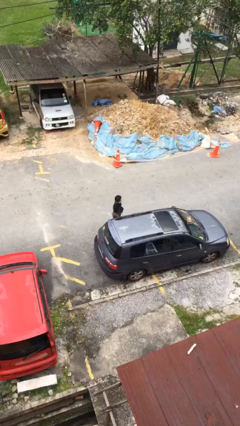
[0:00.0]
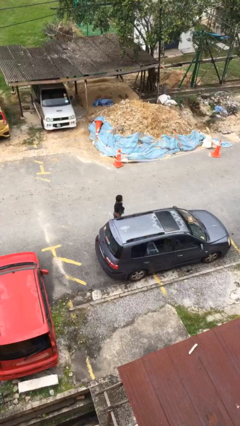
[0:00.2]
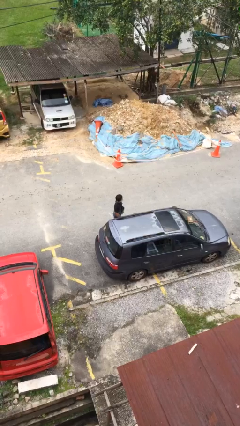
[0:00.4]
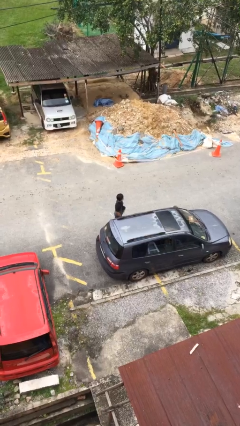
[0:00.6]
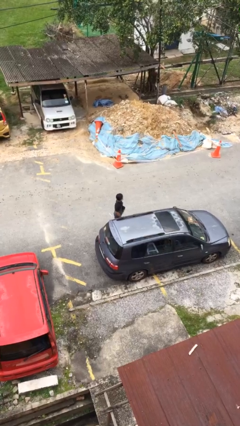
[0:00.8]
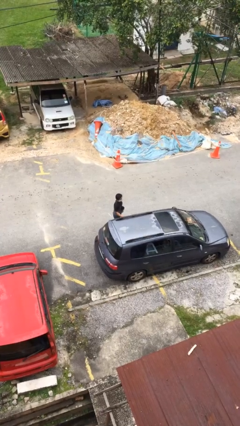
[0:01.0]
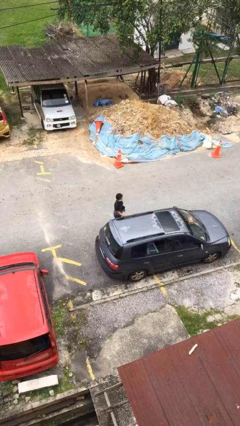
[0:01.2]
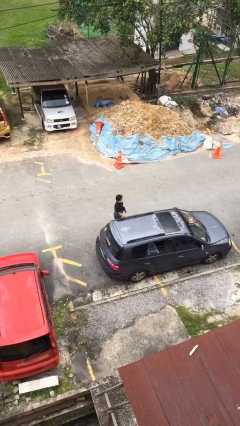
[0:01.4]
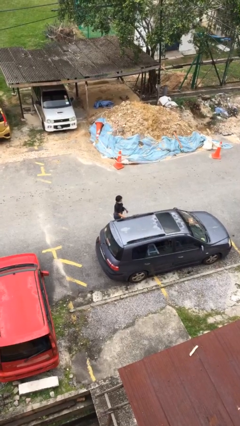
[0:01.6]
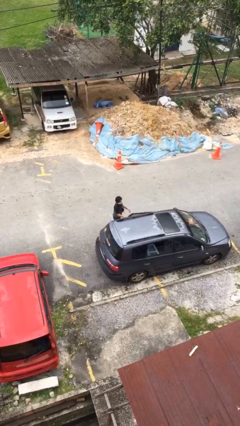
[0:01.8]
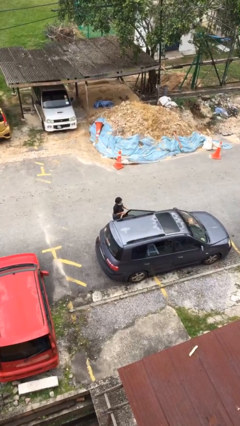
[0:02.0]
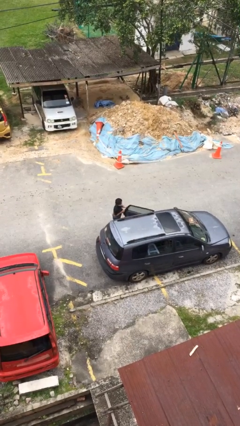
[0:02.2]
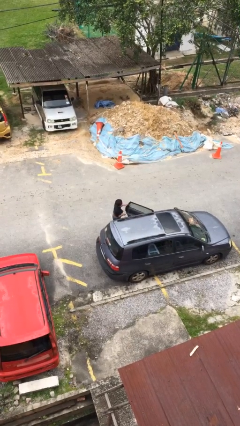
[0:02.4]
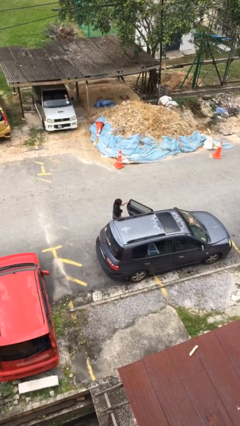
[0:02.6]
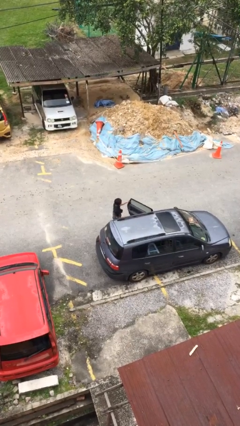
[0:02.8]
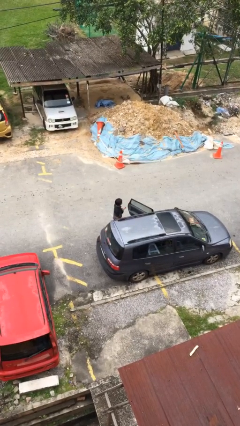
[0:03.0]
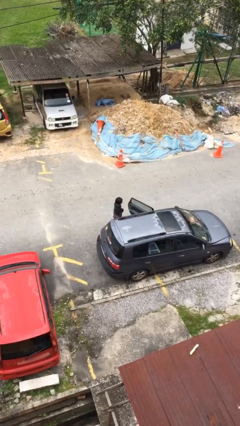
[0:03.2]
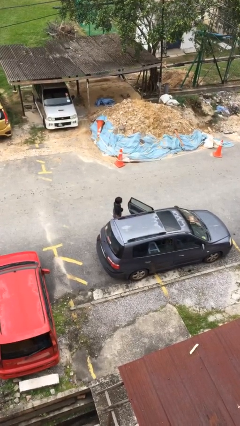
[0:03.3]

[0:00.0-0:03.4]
person opens car door

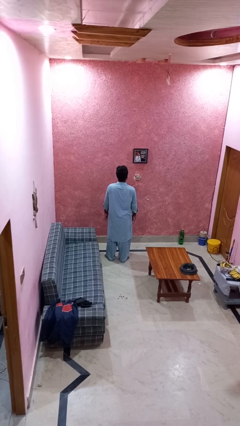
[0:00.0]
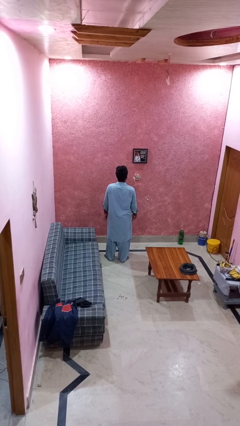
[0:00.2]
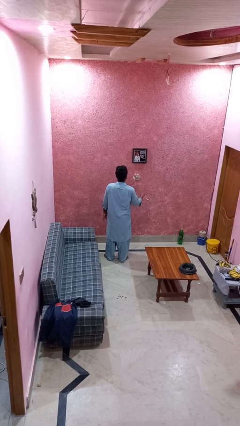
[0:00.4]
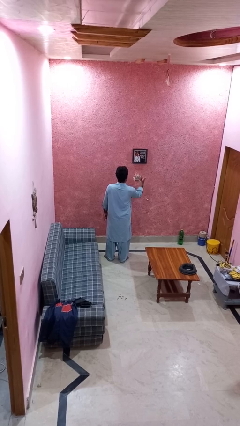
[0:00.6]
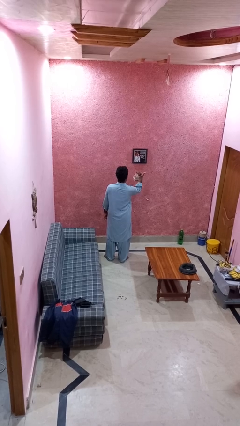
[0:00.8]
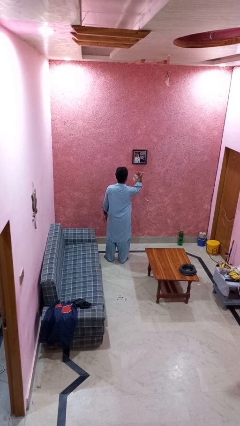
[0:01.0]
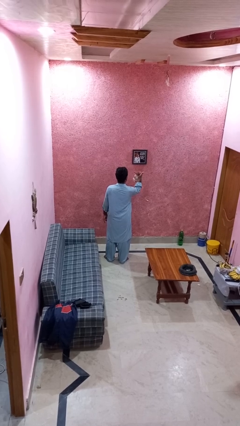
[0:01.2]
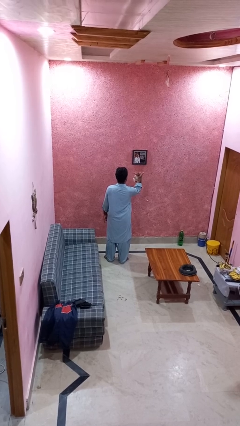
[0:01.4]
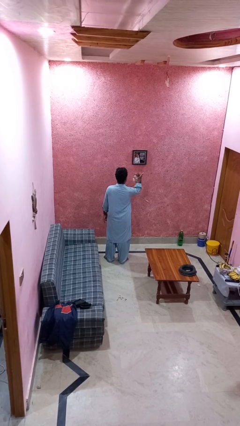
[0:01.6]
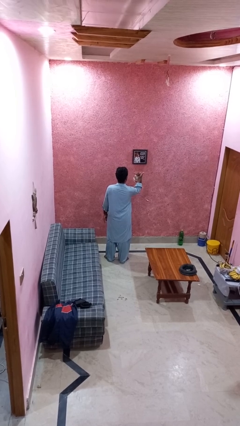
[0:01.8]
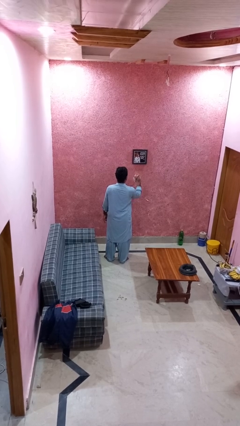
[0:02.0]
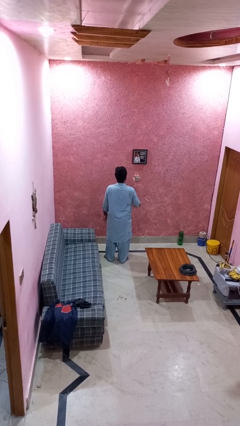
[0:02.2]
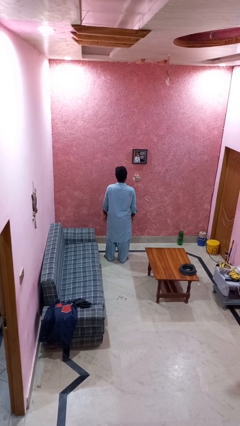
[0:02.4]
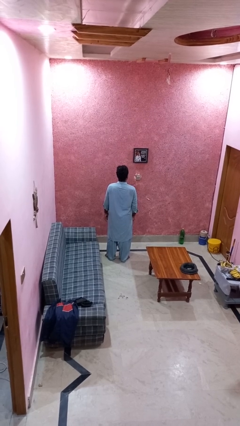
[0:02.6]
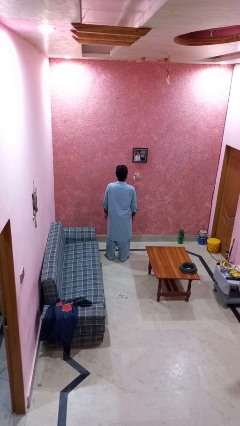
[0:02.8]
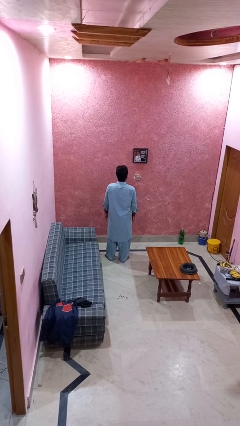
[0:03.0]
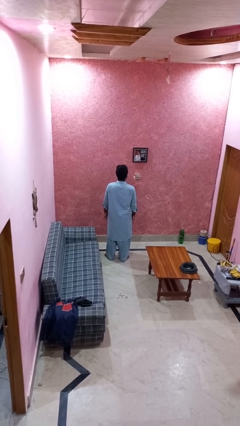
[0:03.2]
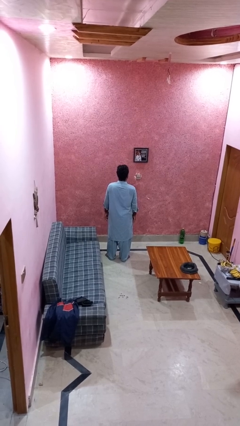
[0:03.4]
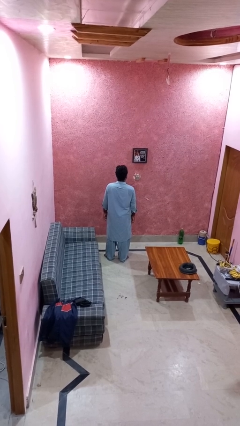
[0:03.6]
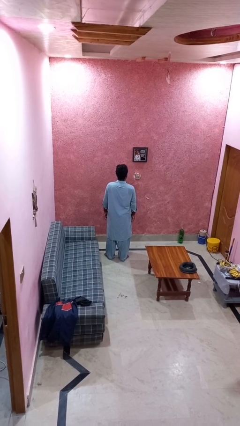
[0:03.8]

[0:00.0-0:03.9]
person gestures hang loose

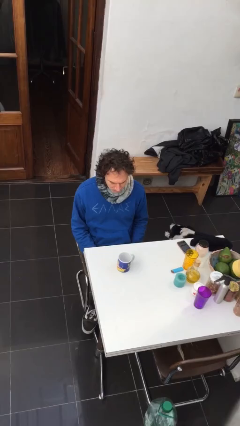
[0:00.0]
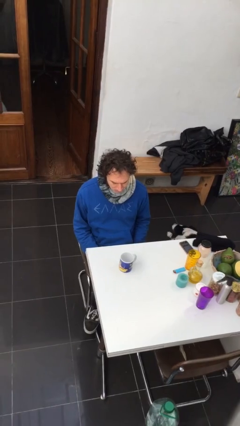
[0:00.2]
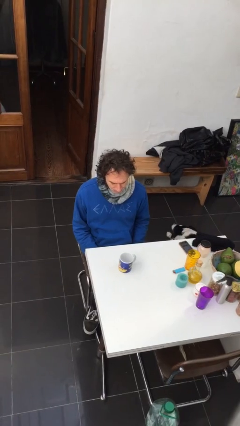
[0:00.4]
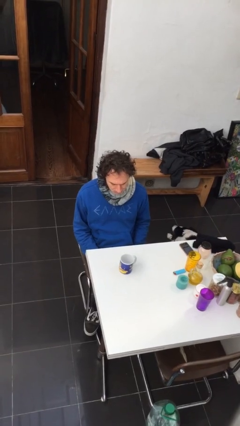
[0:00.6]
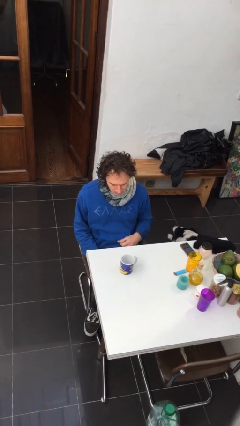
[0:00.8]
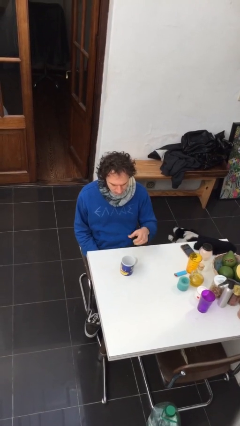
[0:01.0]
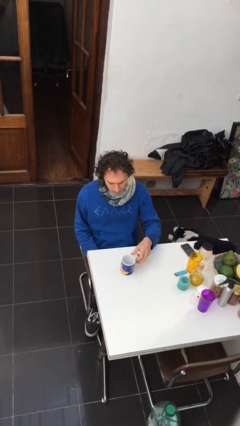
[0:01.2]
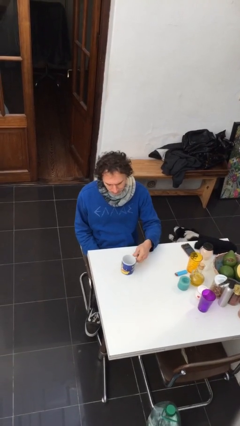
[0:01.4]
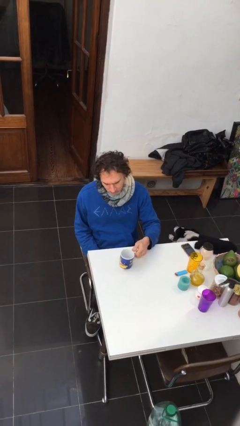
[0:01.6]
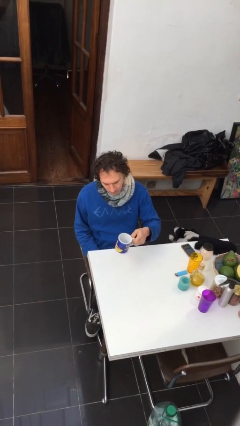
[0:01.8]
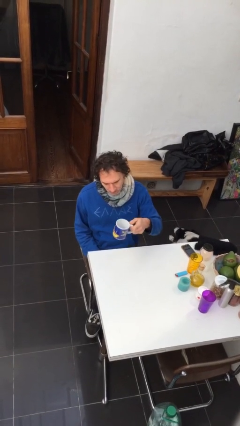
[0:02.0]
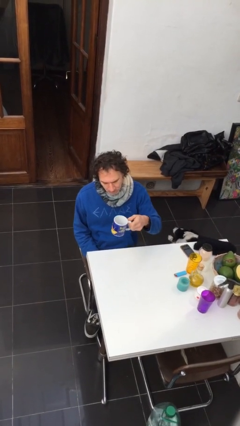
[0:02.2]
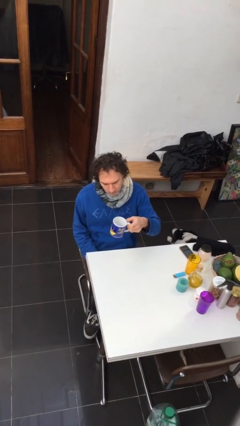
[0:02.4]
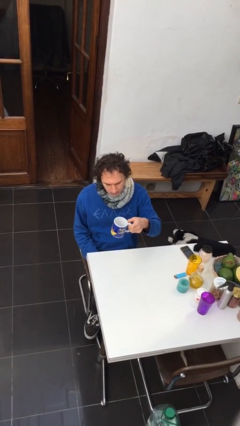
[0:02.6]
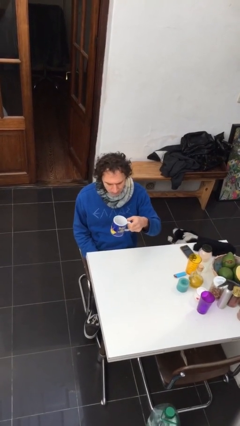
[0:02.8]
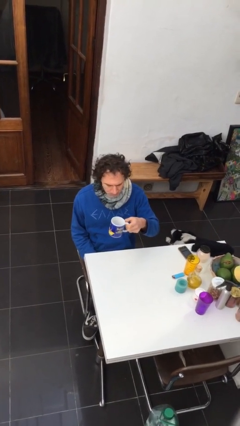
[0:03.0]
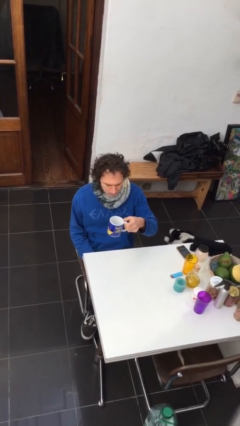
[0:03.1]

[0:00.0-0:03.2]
person picks up object from table

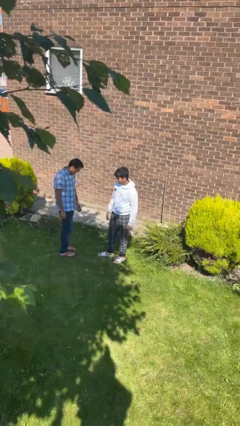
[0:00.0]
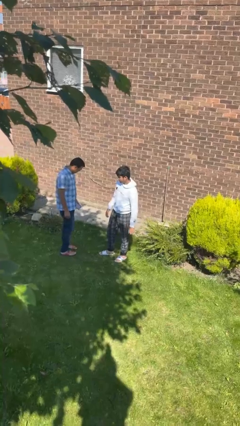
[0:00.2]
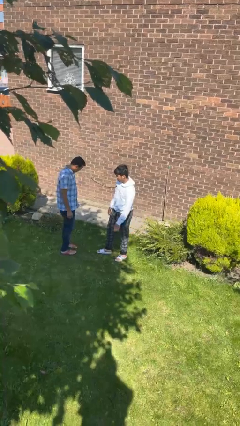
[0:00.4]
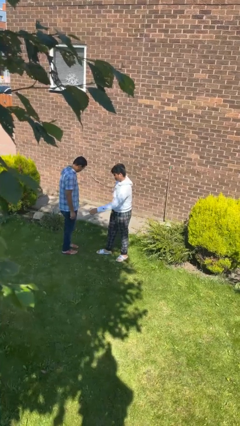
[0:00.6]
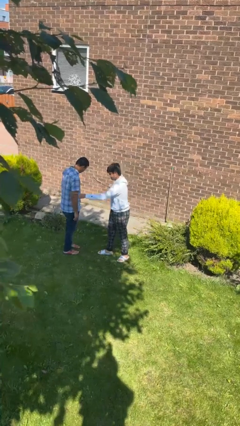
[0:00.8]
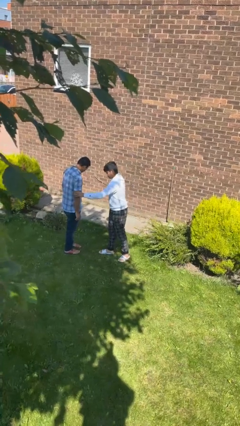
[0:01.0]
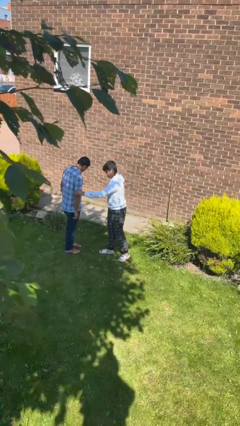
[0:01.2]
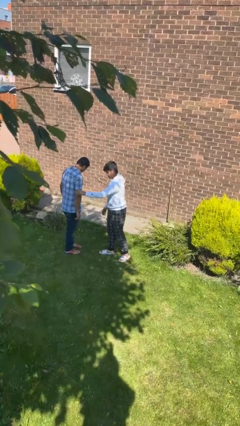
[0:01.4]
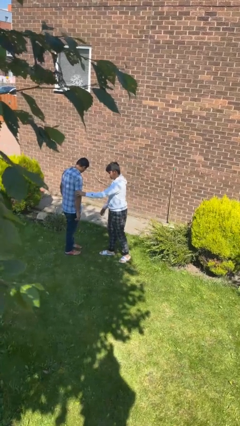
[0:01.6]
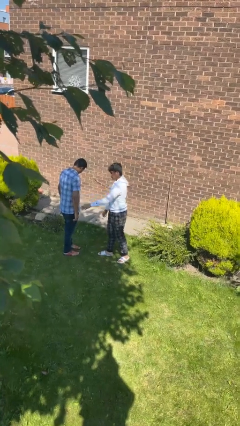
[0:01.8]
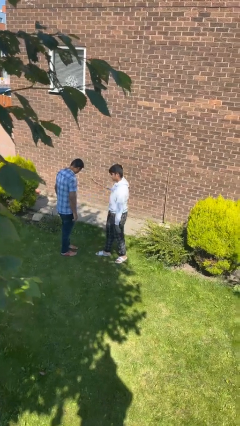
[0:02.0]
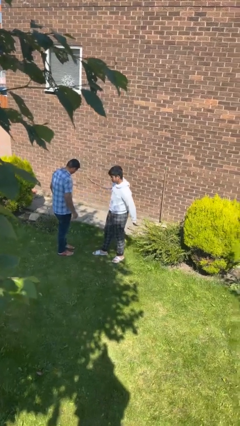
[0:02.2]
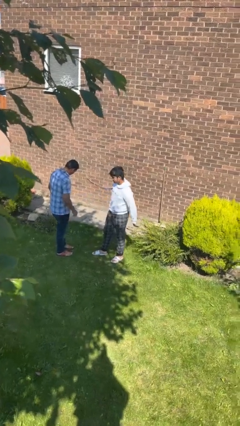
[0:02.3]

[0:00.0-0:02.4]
person grabs person by bicep

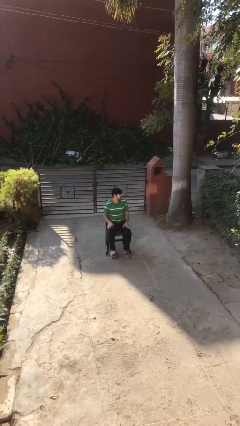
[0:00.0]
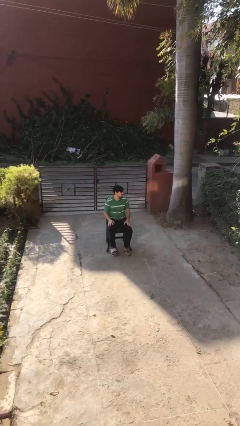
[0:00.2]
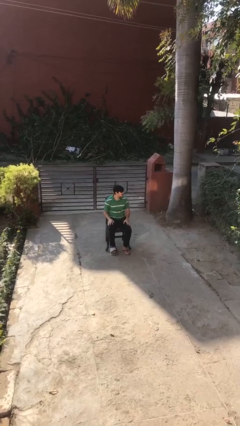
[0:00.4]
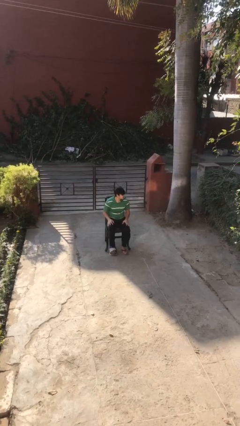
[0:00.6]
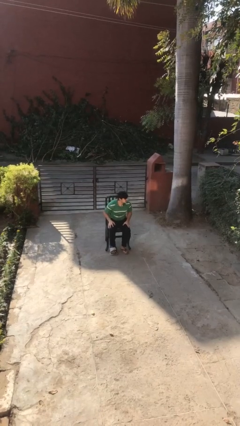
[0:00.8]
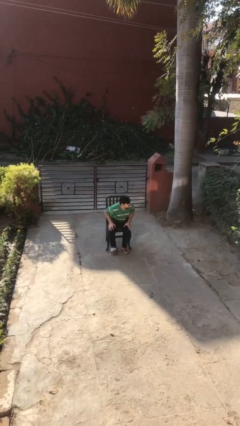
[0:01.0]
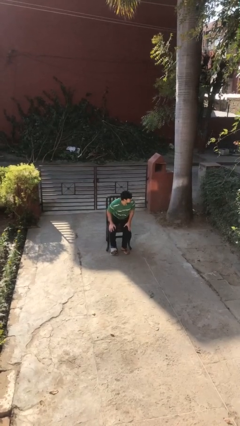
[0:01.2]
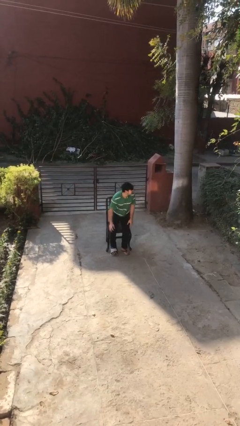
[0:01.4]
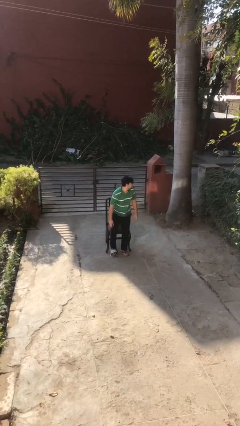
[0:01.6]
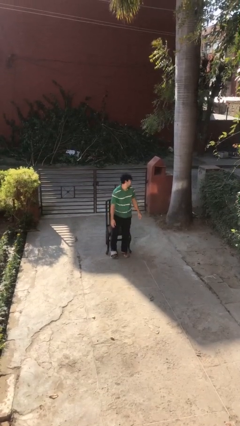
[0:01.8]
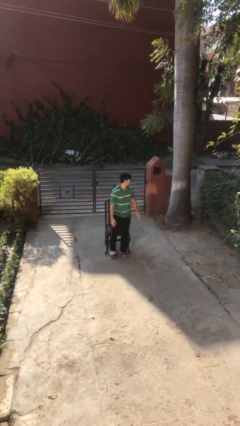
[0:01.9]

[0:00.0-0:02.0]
person stands up

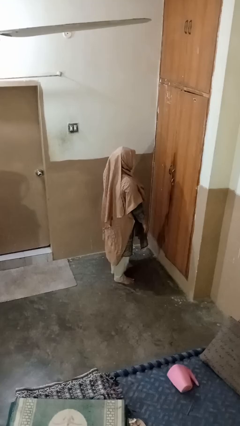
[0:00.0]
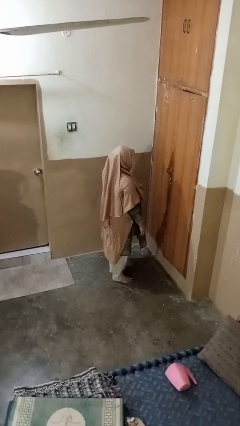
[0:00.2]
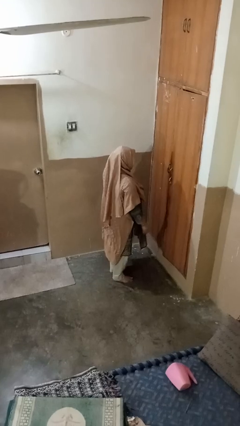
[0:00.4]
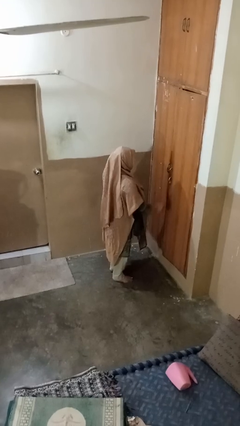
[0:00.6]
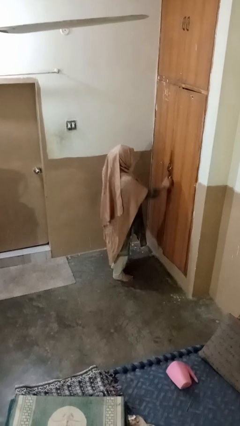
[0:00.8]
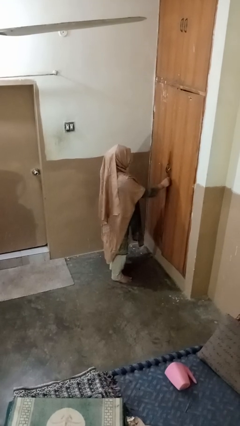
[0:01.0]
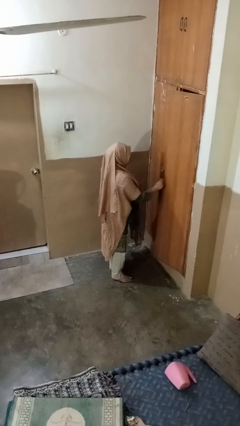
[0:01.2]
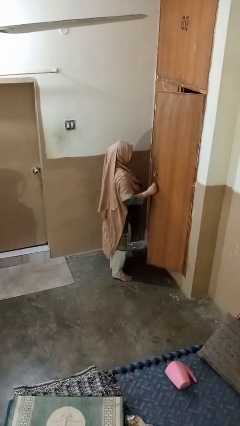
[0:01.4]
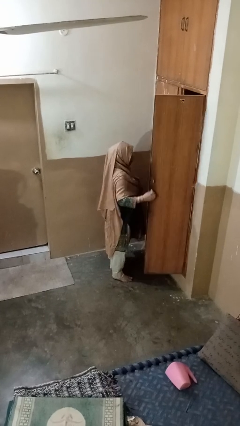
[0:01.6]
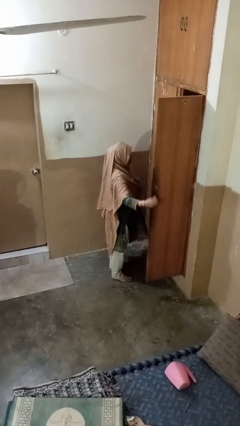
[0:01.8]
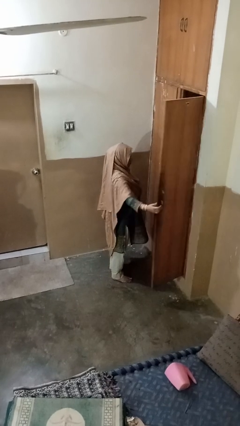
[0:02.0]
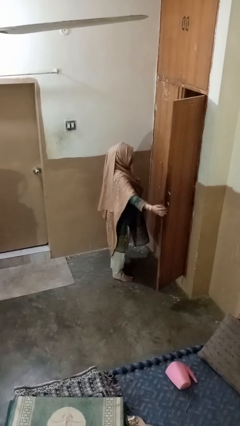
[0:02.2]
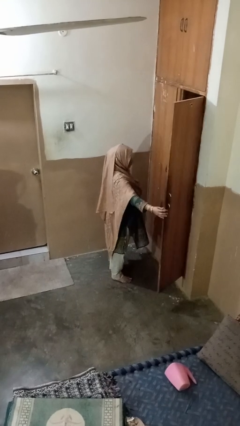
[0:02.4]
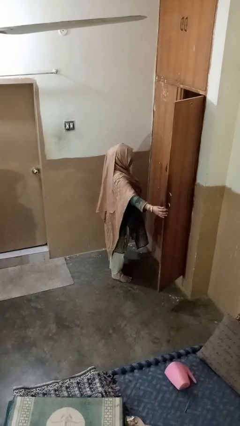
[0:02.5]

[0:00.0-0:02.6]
person opens closet door
